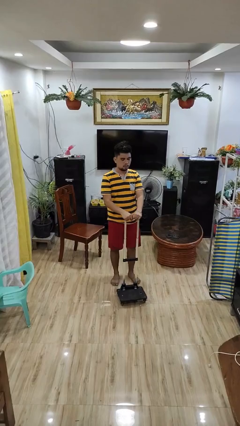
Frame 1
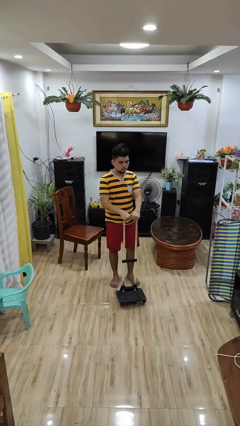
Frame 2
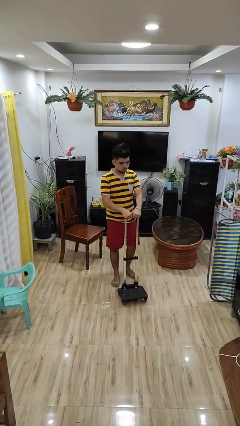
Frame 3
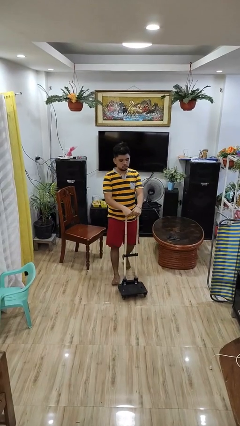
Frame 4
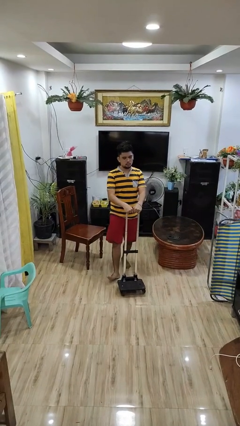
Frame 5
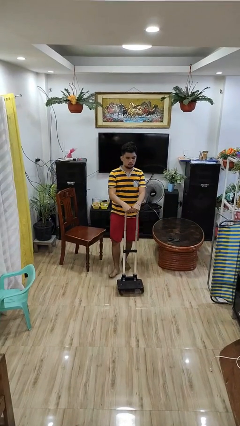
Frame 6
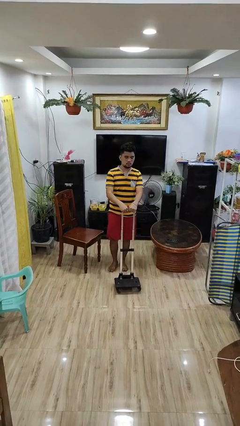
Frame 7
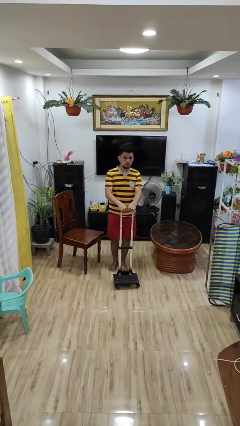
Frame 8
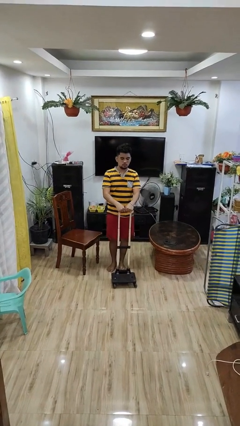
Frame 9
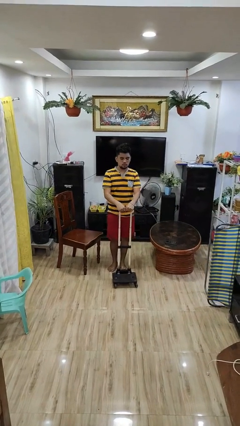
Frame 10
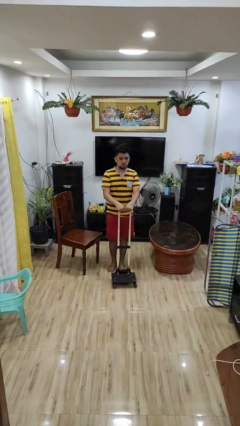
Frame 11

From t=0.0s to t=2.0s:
person pulls wheeled cart

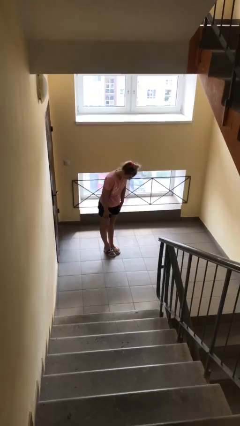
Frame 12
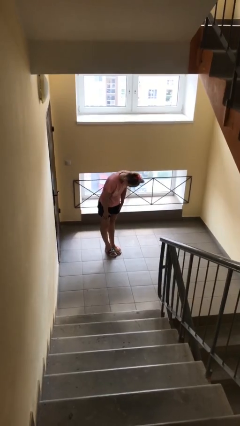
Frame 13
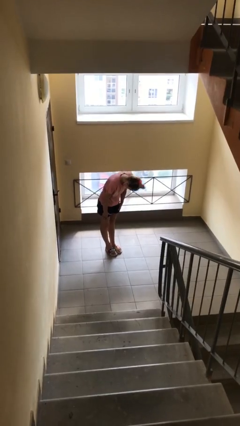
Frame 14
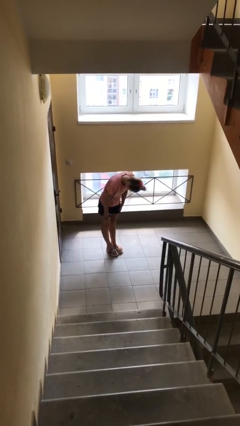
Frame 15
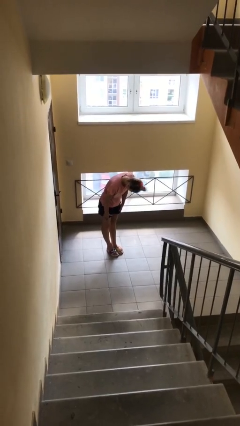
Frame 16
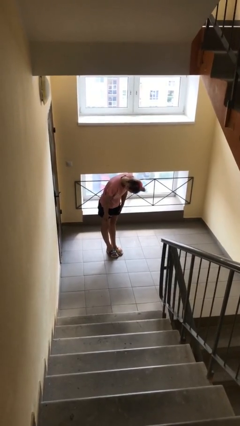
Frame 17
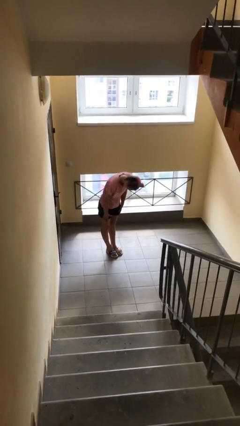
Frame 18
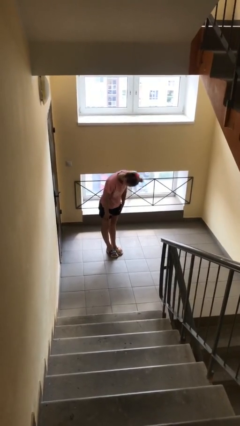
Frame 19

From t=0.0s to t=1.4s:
person bows

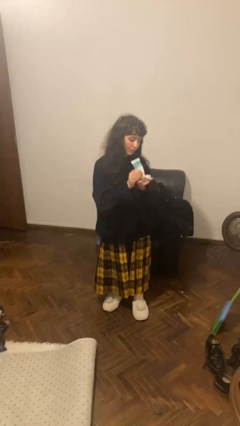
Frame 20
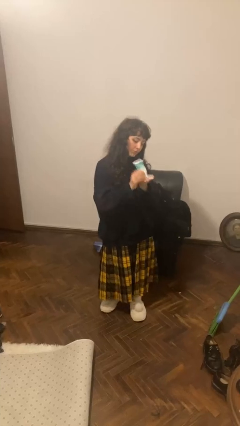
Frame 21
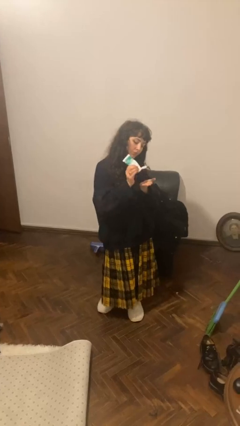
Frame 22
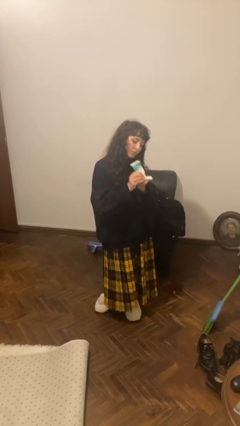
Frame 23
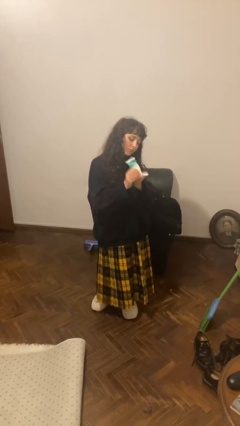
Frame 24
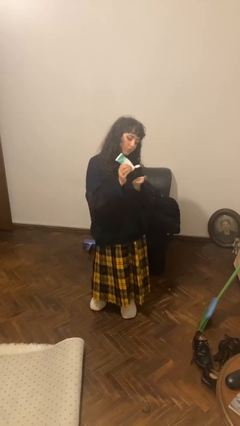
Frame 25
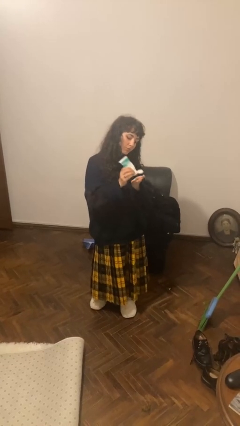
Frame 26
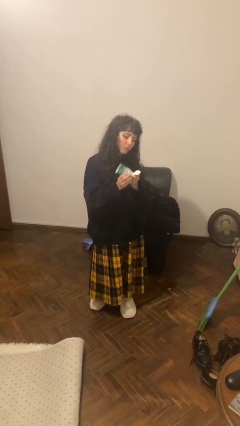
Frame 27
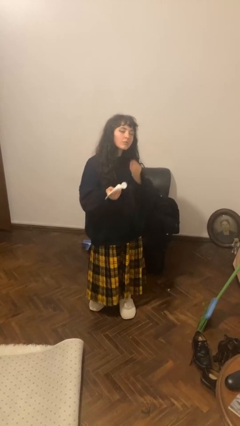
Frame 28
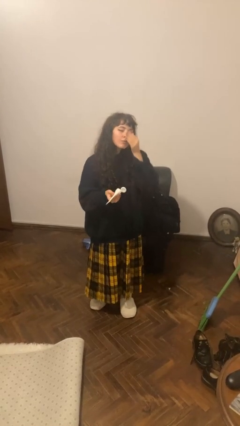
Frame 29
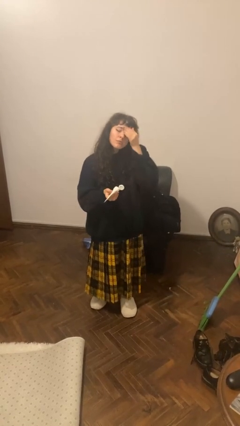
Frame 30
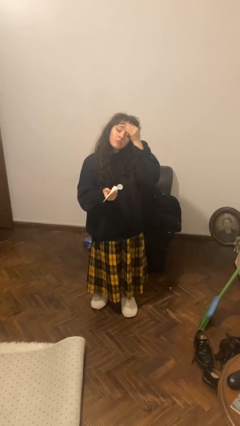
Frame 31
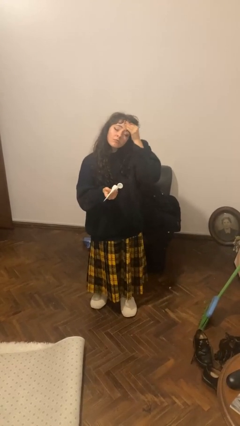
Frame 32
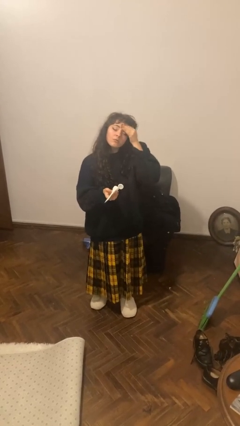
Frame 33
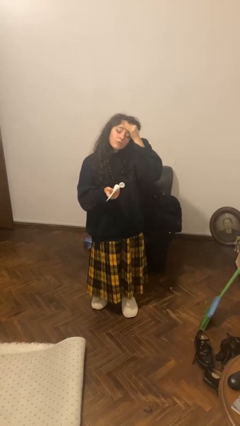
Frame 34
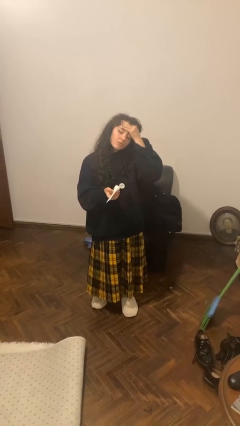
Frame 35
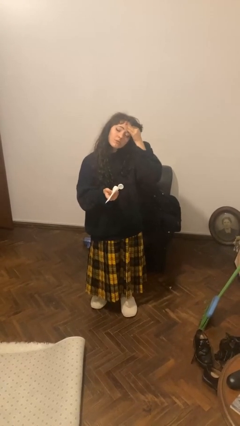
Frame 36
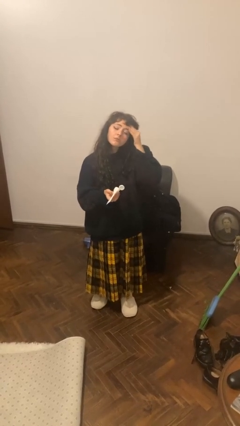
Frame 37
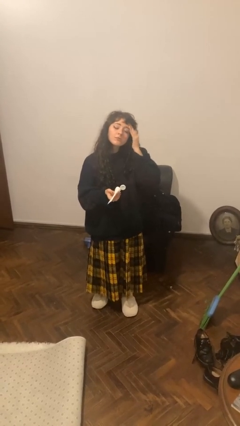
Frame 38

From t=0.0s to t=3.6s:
person applies facial moisturizer

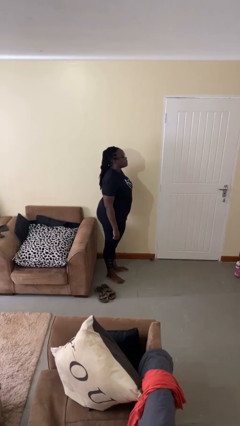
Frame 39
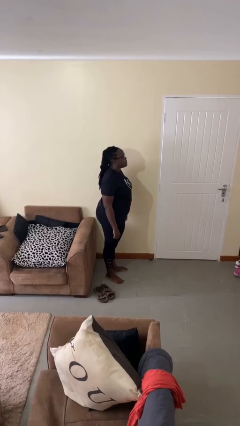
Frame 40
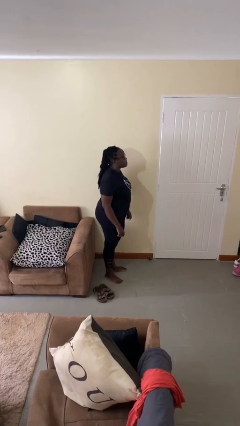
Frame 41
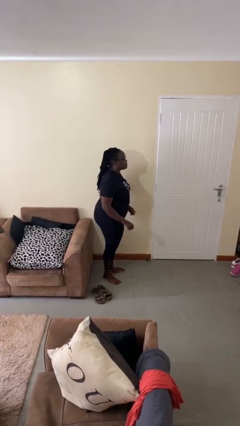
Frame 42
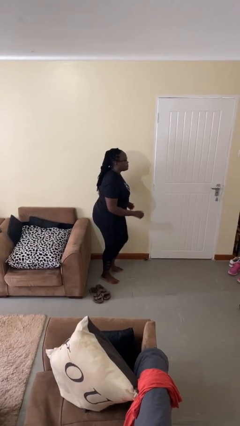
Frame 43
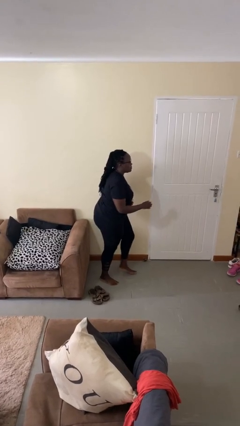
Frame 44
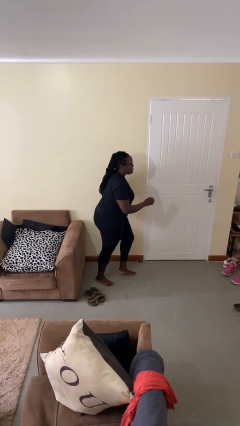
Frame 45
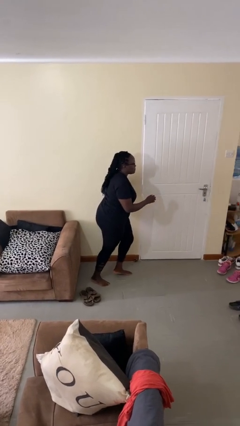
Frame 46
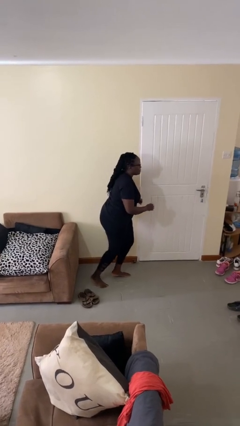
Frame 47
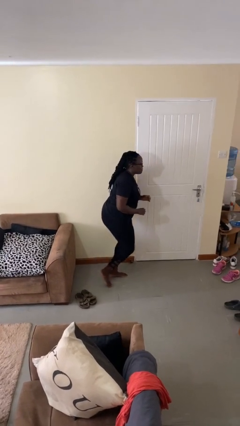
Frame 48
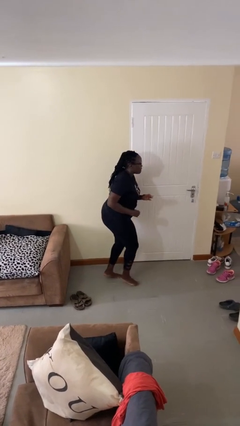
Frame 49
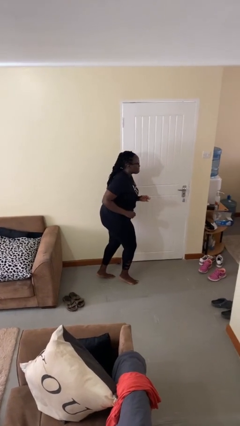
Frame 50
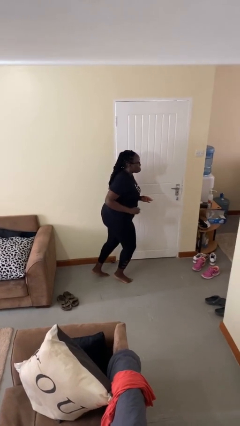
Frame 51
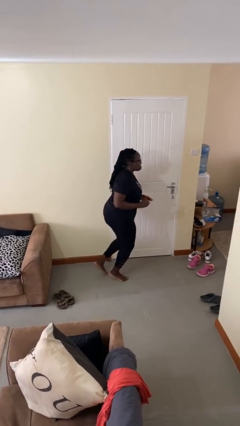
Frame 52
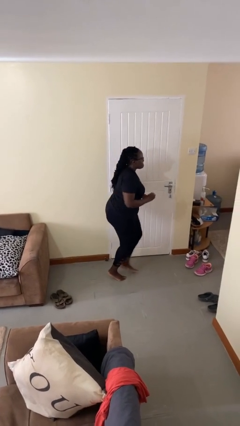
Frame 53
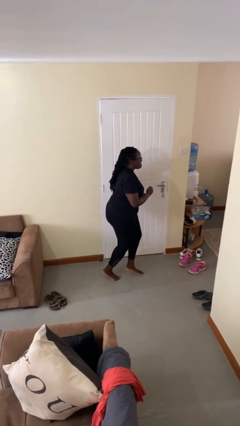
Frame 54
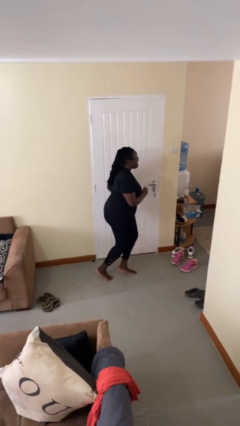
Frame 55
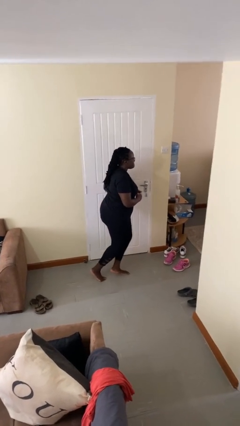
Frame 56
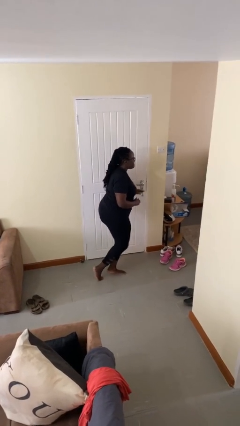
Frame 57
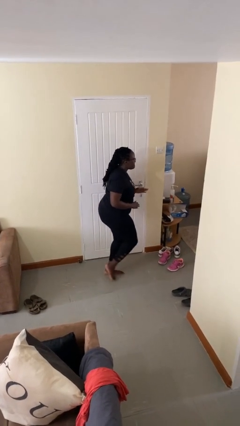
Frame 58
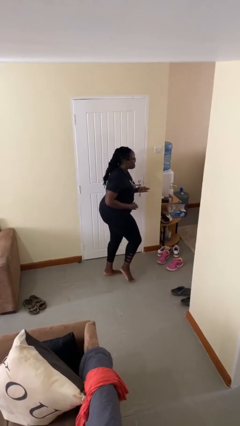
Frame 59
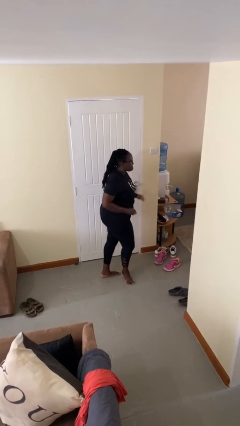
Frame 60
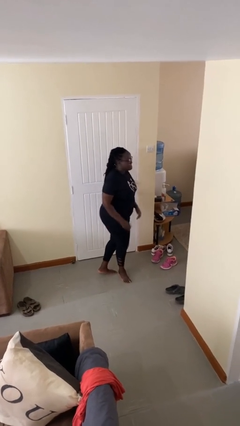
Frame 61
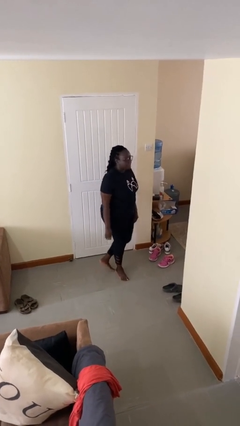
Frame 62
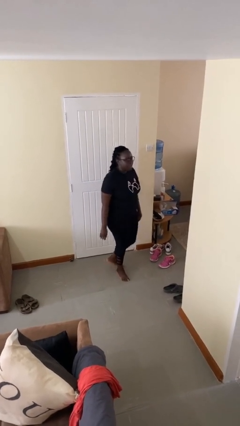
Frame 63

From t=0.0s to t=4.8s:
person walks tiptoe

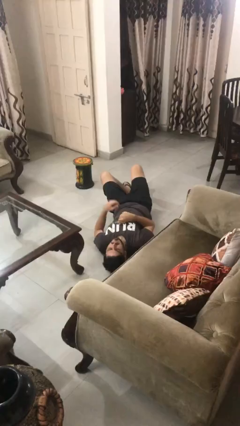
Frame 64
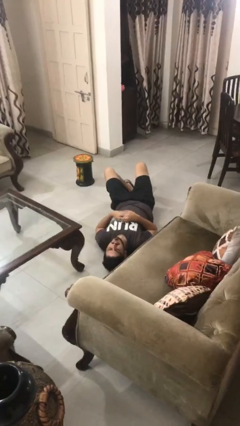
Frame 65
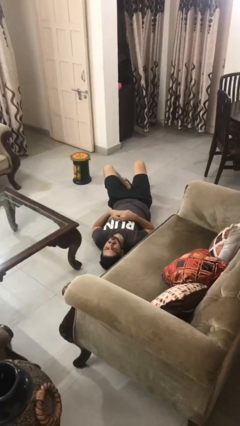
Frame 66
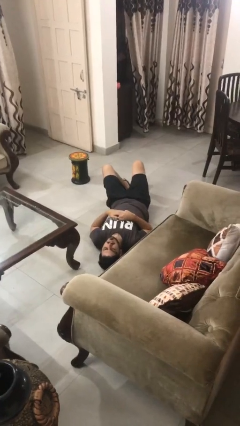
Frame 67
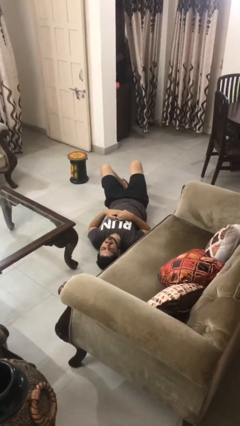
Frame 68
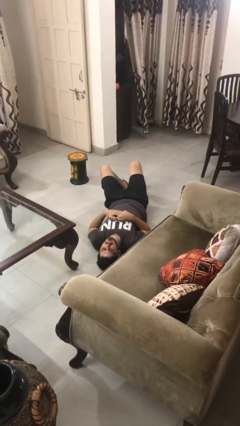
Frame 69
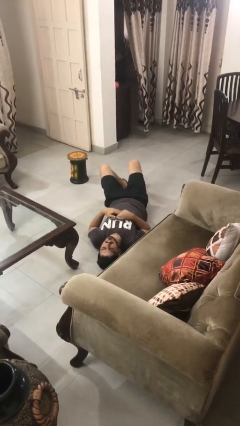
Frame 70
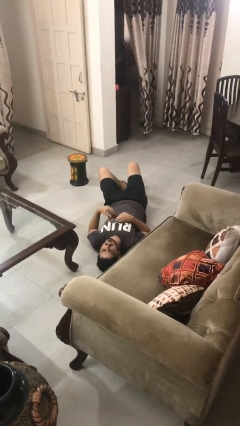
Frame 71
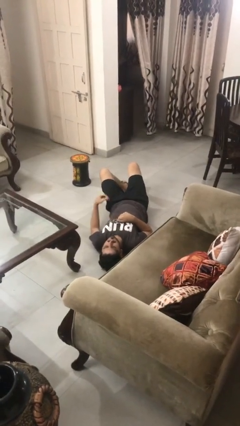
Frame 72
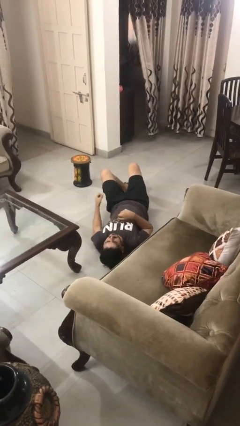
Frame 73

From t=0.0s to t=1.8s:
person lies down on floor

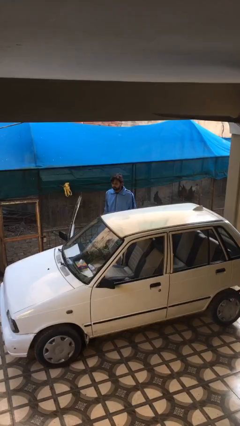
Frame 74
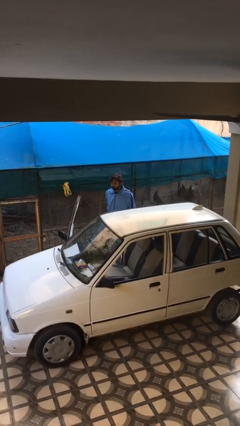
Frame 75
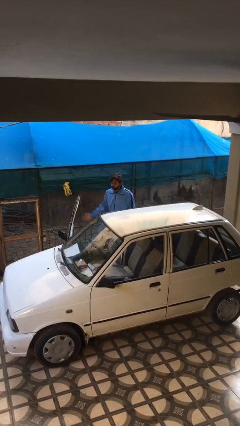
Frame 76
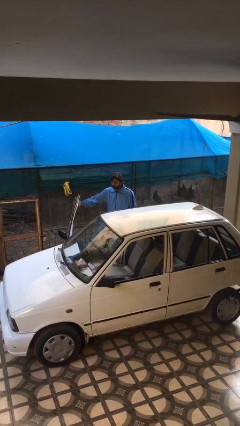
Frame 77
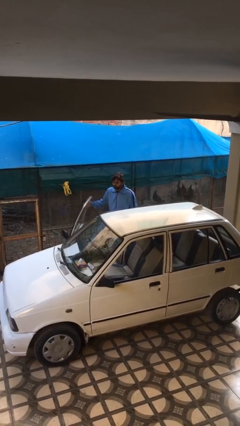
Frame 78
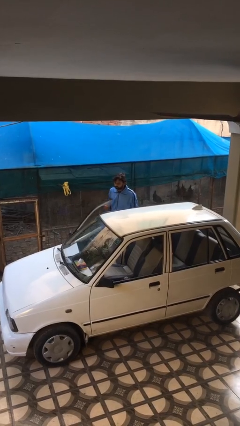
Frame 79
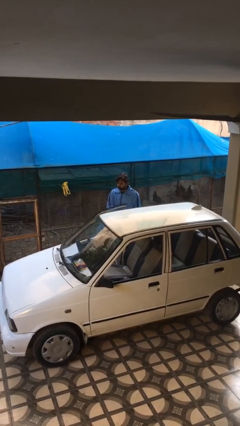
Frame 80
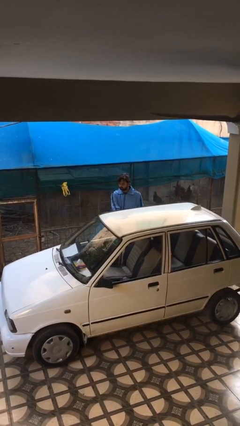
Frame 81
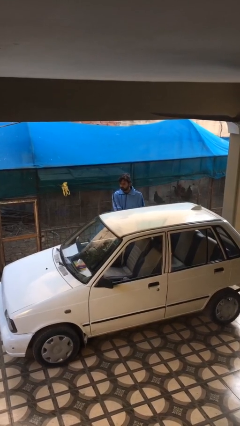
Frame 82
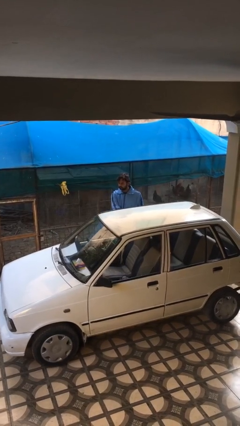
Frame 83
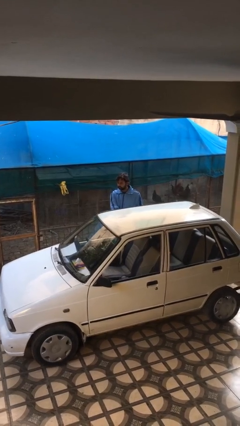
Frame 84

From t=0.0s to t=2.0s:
person closes car door

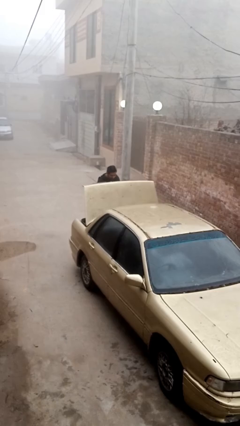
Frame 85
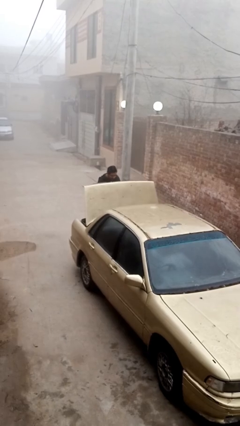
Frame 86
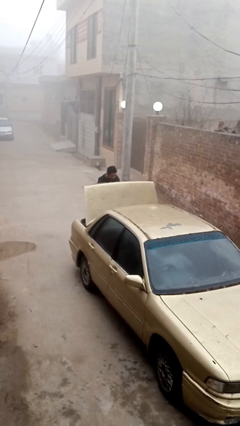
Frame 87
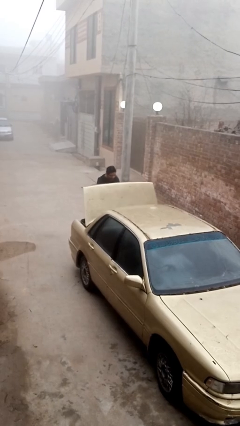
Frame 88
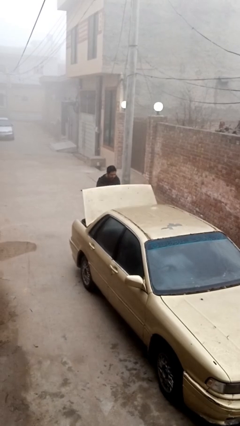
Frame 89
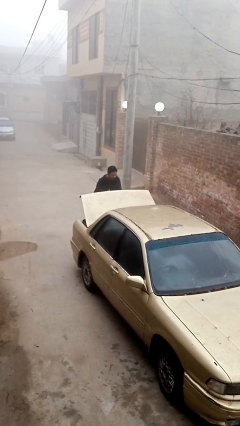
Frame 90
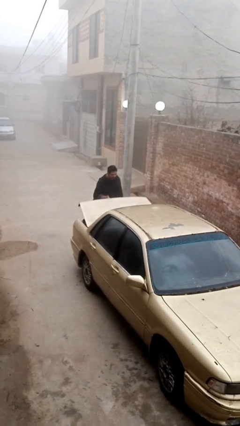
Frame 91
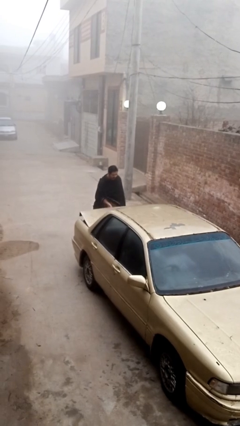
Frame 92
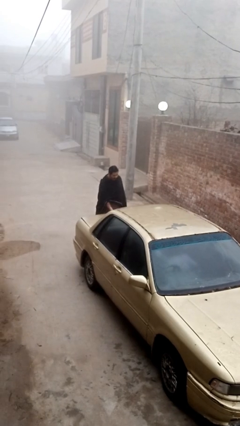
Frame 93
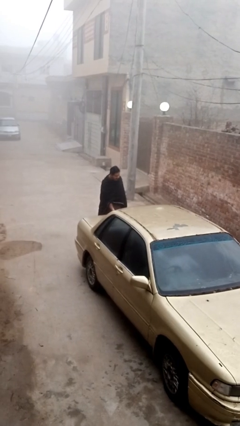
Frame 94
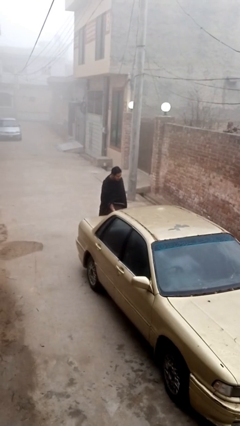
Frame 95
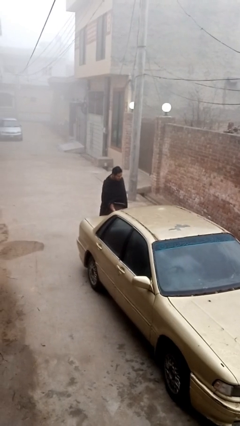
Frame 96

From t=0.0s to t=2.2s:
person closes car trunk
